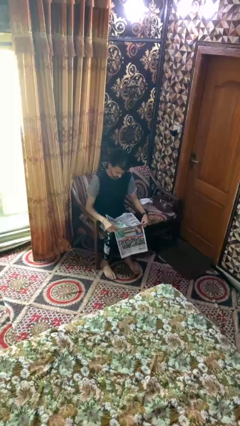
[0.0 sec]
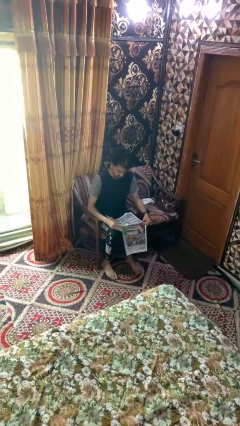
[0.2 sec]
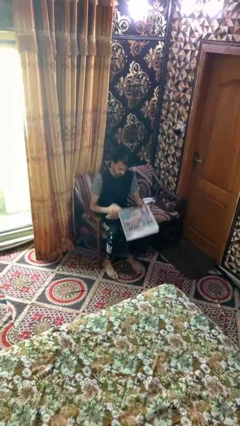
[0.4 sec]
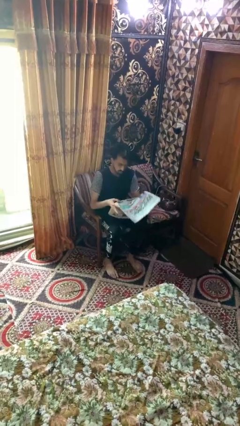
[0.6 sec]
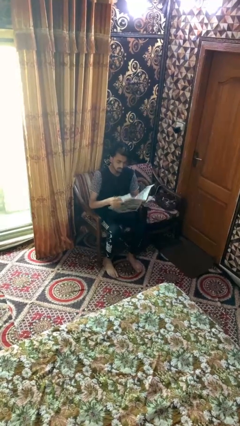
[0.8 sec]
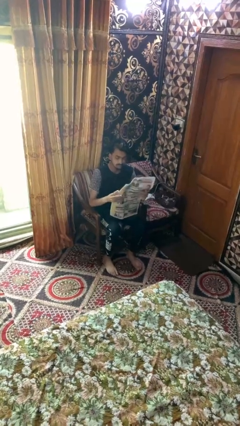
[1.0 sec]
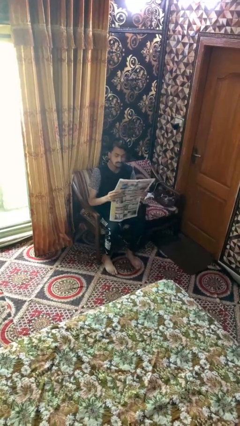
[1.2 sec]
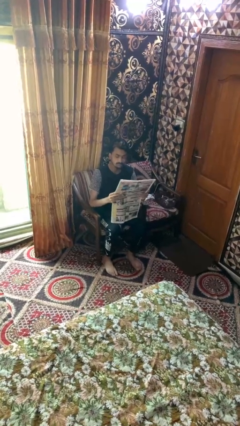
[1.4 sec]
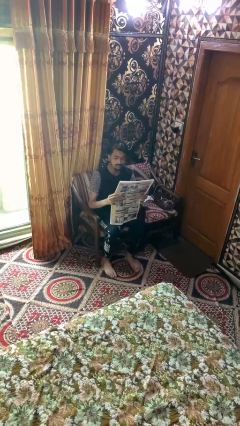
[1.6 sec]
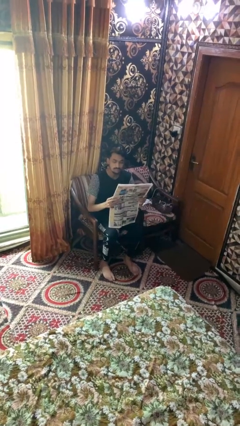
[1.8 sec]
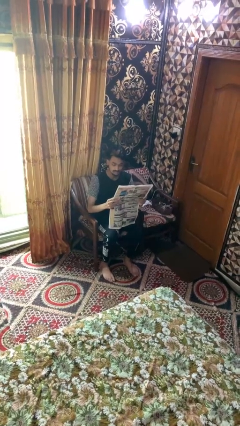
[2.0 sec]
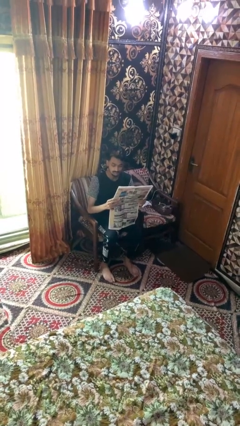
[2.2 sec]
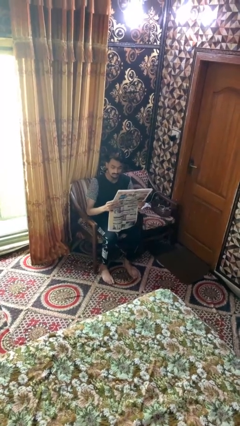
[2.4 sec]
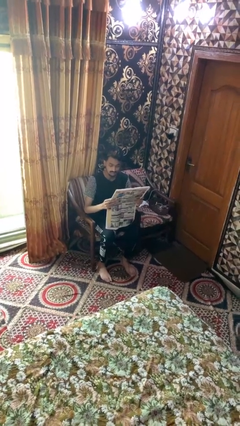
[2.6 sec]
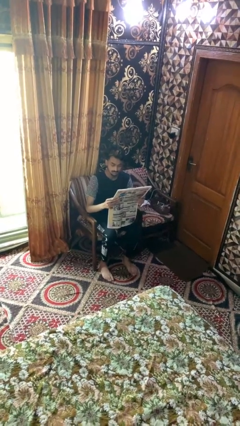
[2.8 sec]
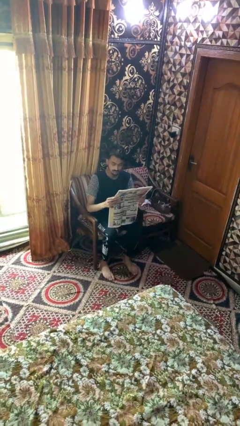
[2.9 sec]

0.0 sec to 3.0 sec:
person reads newspaper

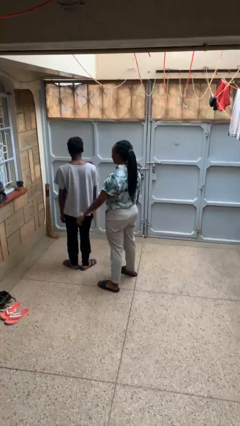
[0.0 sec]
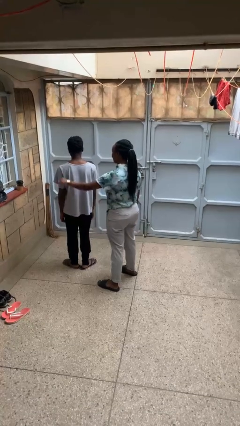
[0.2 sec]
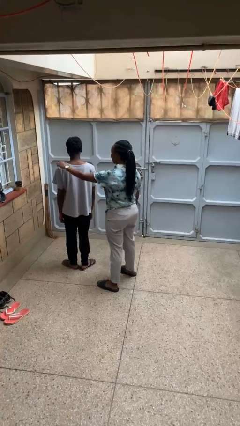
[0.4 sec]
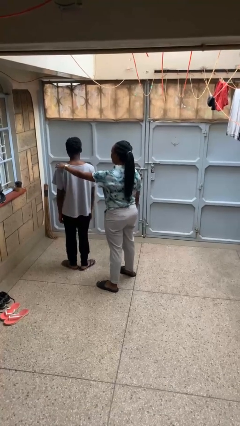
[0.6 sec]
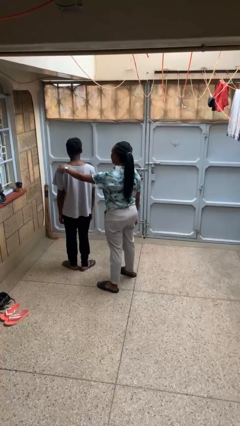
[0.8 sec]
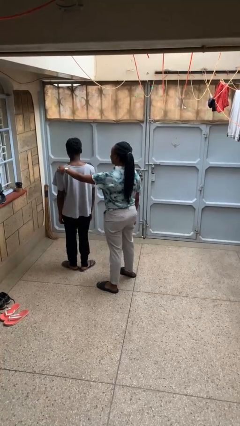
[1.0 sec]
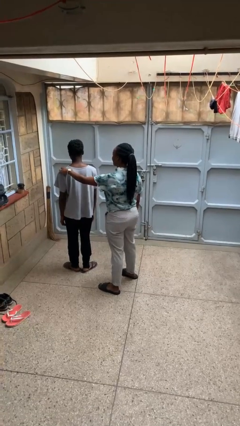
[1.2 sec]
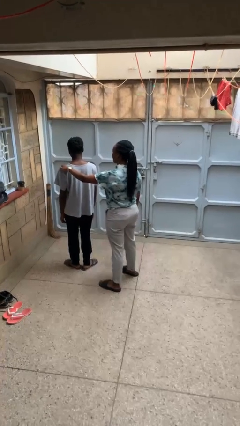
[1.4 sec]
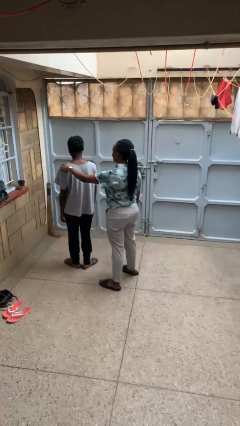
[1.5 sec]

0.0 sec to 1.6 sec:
person grabs person by shoulder

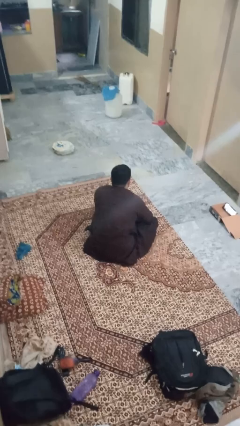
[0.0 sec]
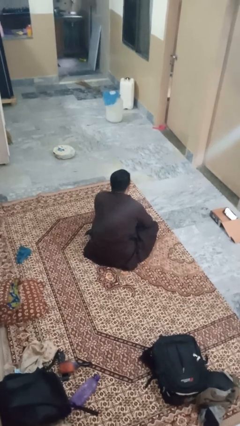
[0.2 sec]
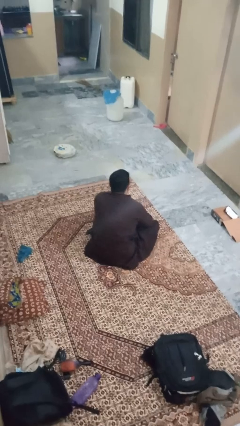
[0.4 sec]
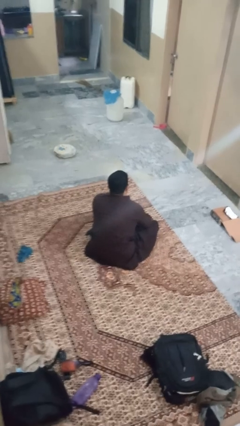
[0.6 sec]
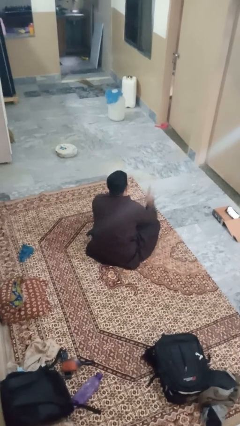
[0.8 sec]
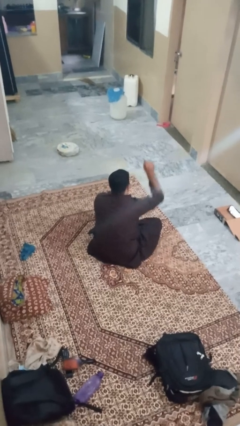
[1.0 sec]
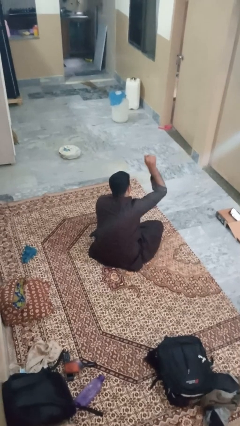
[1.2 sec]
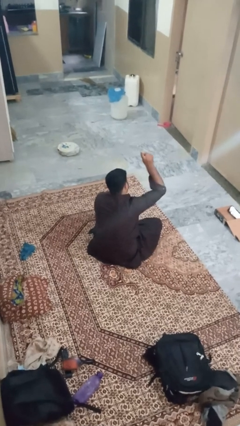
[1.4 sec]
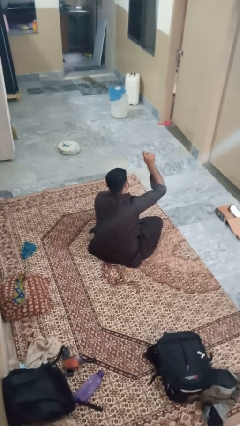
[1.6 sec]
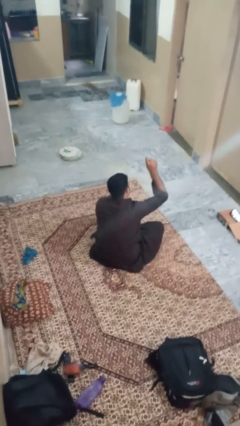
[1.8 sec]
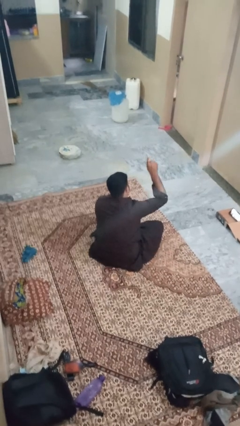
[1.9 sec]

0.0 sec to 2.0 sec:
person gestures number one

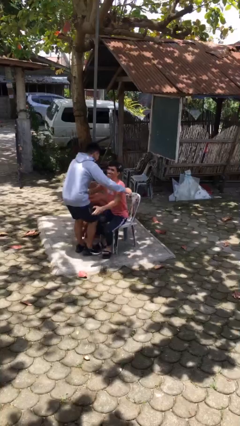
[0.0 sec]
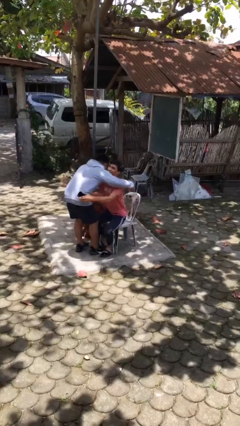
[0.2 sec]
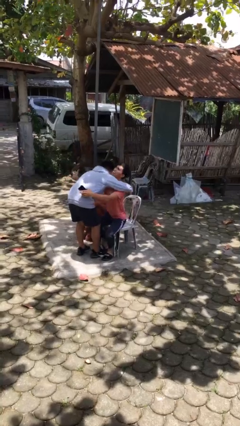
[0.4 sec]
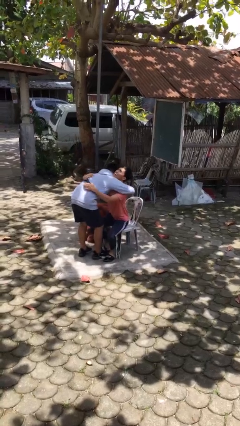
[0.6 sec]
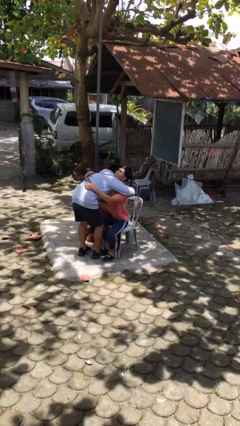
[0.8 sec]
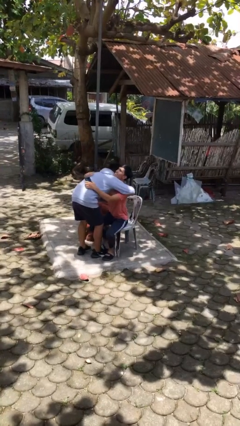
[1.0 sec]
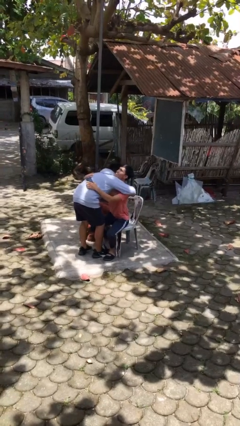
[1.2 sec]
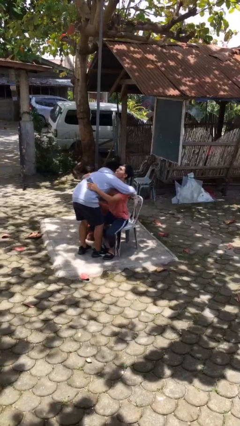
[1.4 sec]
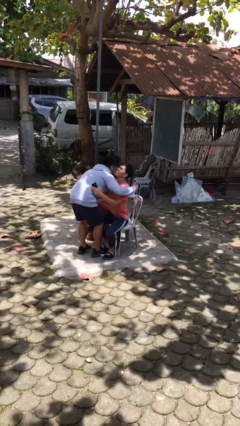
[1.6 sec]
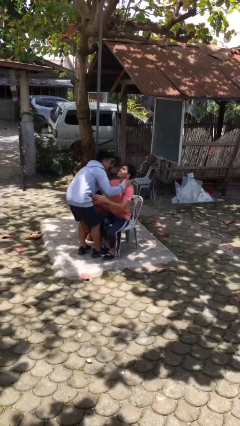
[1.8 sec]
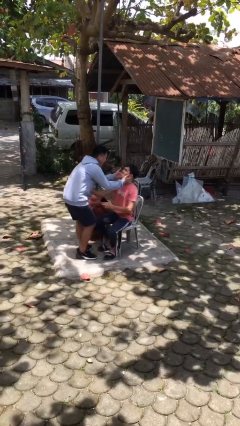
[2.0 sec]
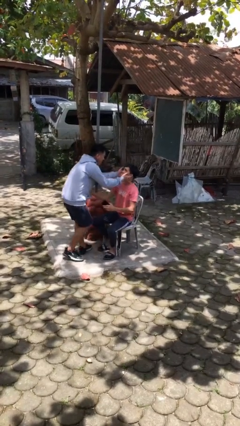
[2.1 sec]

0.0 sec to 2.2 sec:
person embraces person

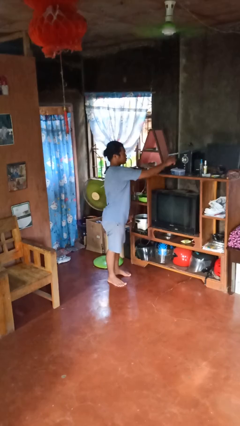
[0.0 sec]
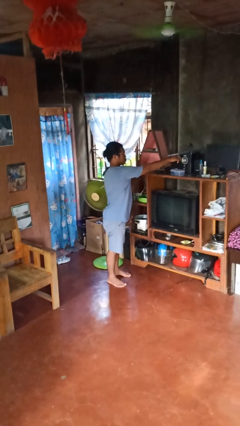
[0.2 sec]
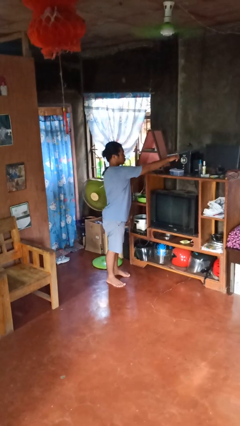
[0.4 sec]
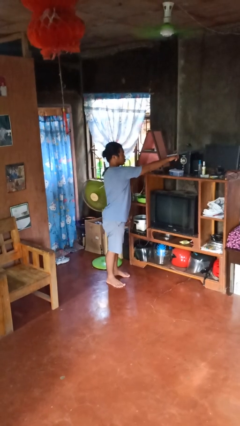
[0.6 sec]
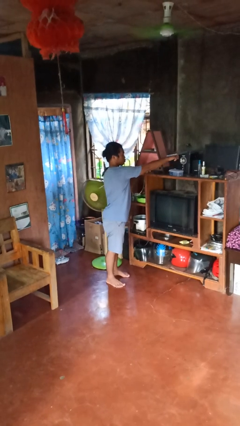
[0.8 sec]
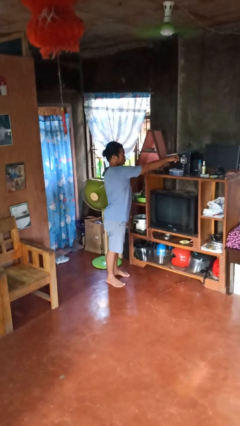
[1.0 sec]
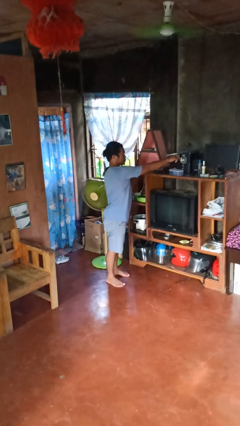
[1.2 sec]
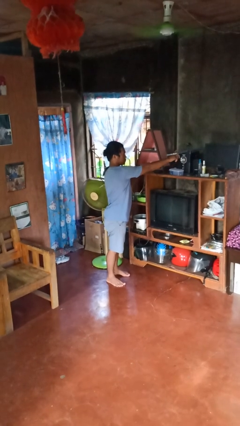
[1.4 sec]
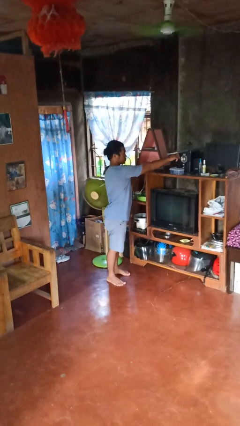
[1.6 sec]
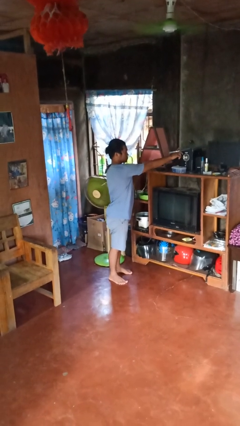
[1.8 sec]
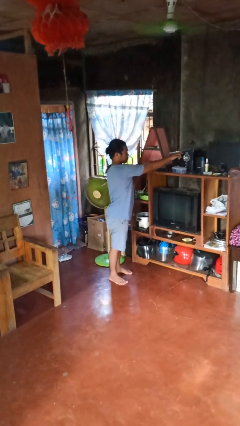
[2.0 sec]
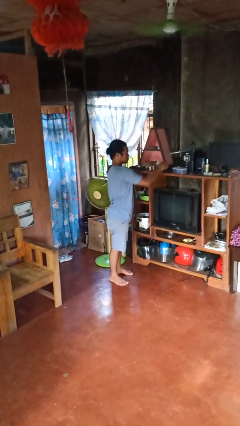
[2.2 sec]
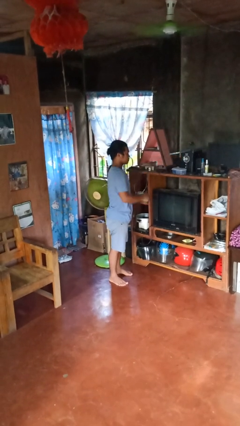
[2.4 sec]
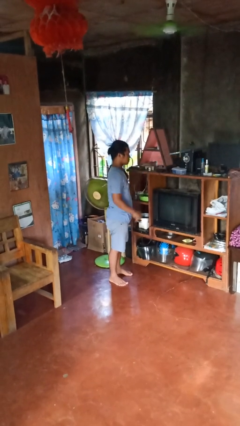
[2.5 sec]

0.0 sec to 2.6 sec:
person taps object with finger

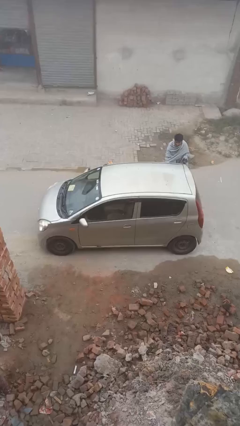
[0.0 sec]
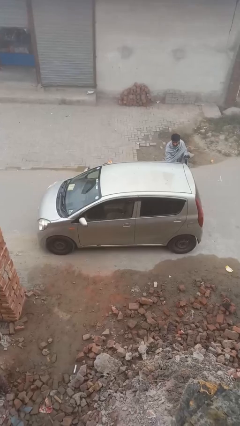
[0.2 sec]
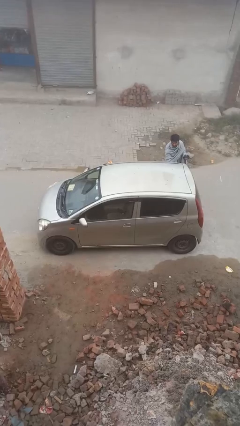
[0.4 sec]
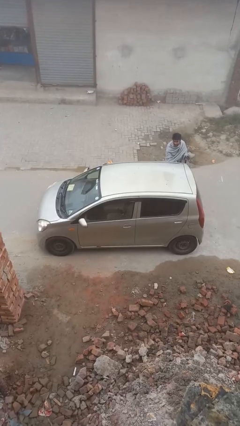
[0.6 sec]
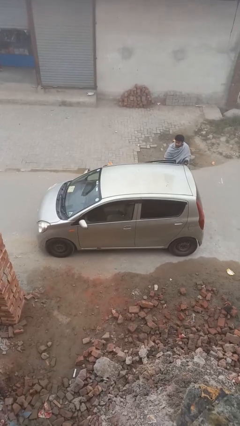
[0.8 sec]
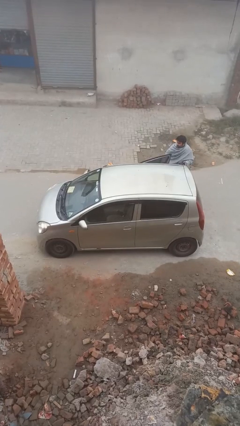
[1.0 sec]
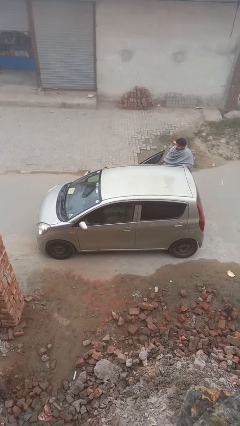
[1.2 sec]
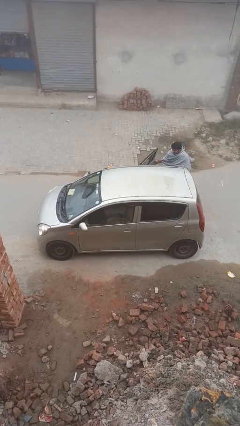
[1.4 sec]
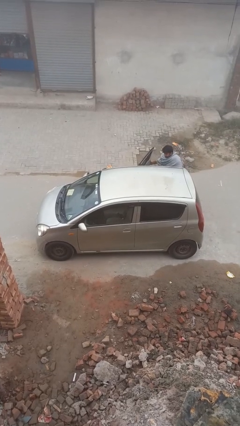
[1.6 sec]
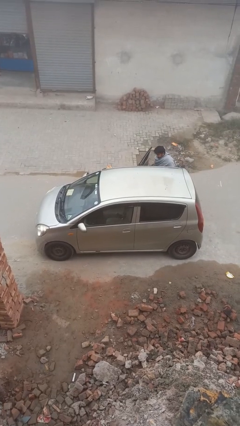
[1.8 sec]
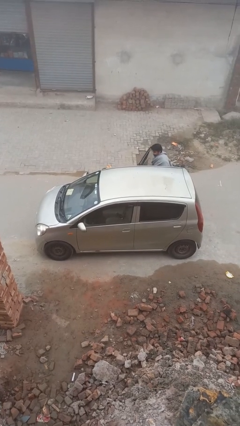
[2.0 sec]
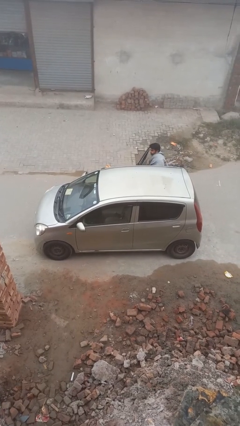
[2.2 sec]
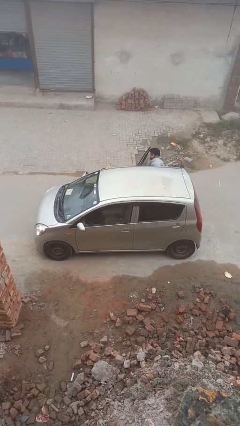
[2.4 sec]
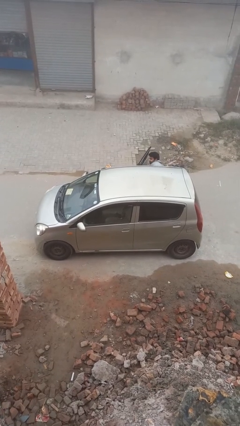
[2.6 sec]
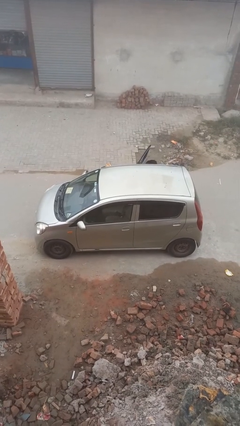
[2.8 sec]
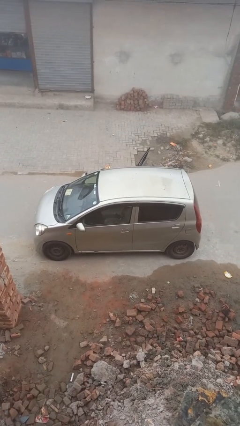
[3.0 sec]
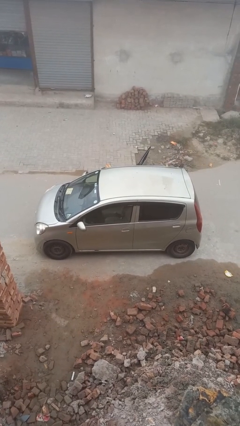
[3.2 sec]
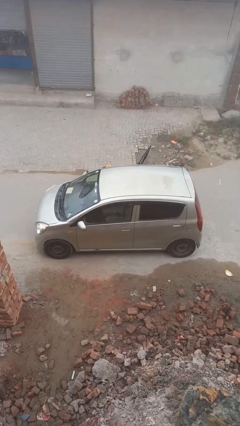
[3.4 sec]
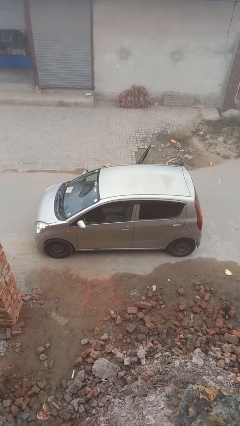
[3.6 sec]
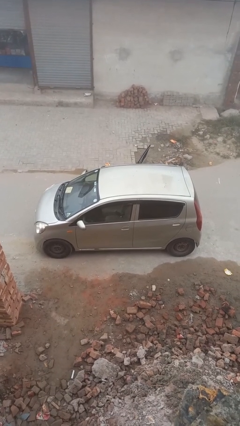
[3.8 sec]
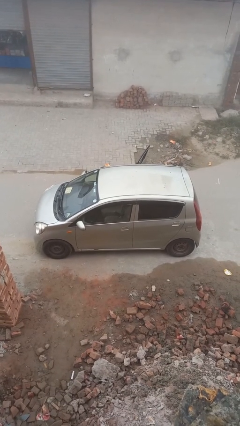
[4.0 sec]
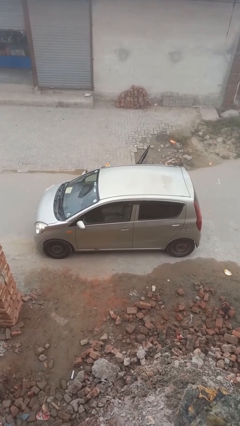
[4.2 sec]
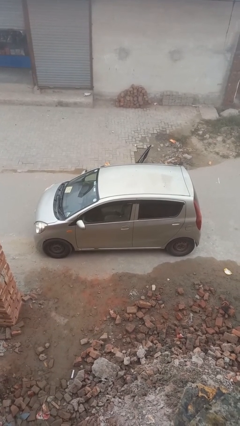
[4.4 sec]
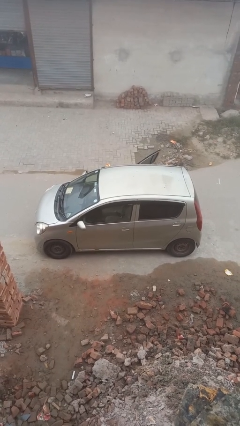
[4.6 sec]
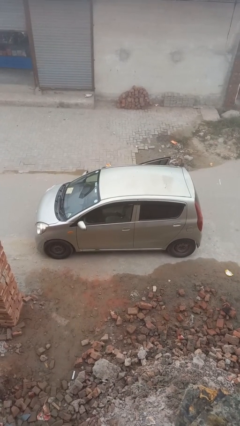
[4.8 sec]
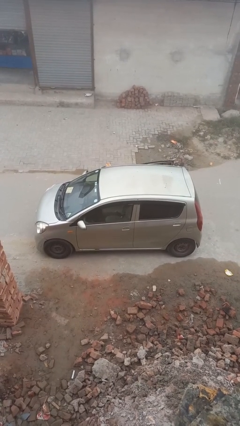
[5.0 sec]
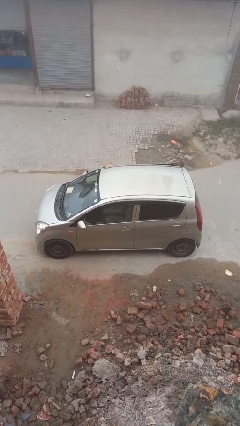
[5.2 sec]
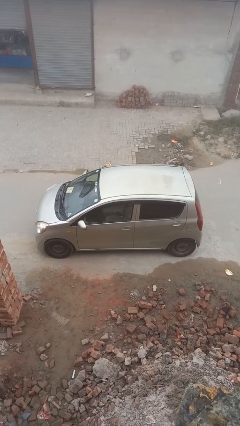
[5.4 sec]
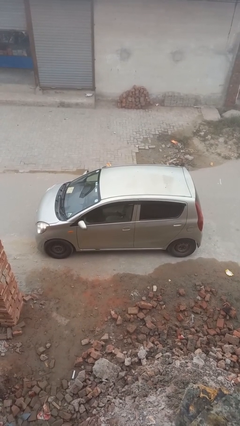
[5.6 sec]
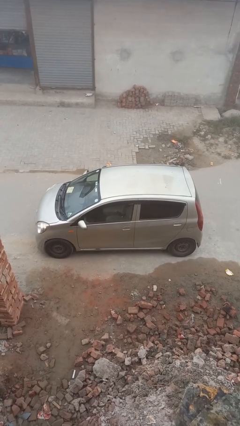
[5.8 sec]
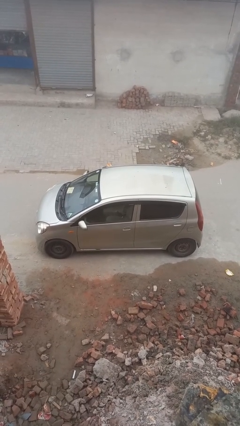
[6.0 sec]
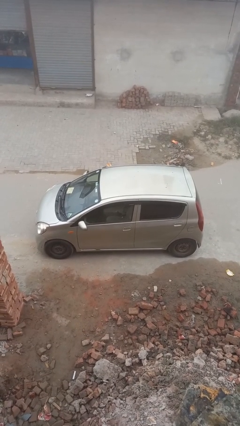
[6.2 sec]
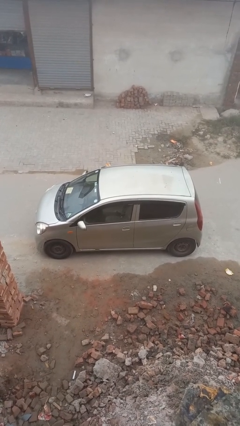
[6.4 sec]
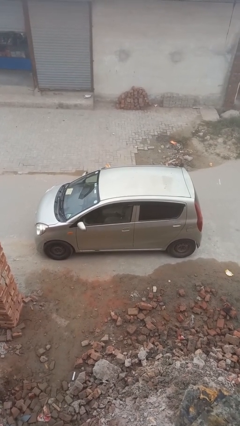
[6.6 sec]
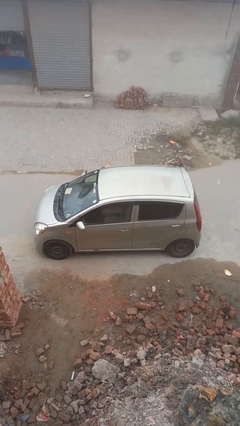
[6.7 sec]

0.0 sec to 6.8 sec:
car picks up person
